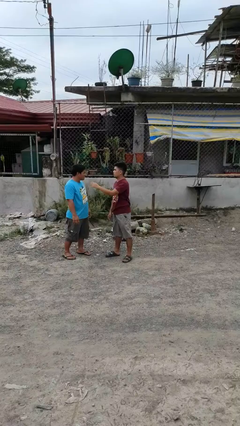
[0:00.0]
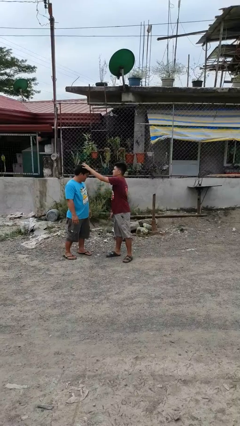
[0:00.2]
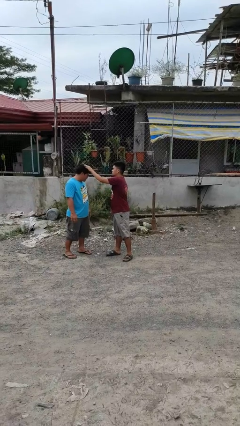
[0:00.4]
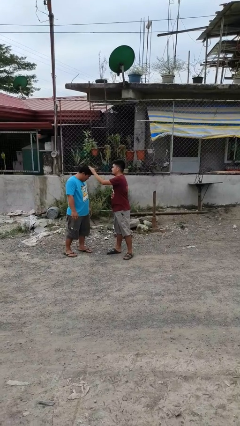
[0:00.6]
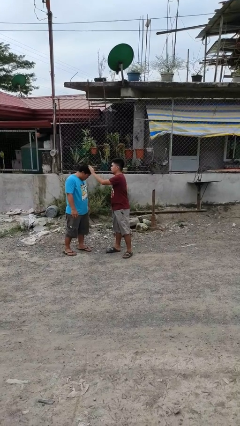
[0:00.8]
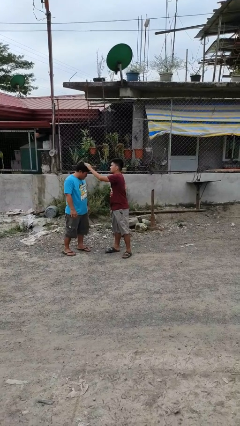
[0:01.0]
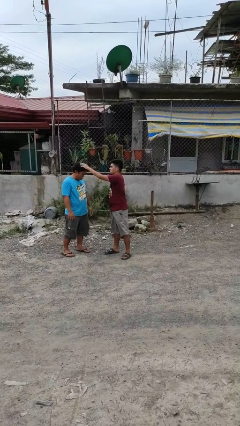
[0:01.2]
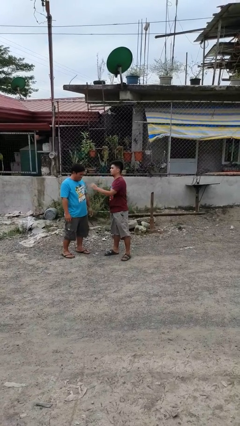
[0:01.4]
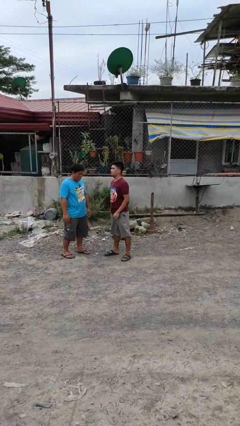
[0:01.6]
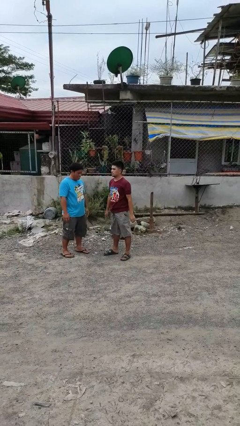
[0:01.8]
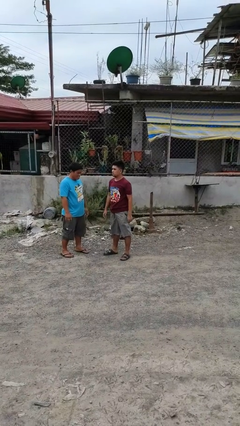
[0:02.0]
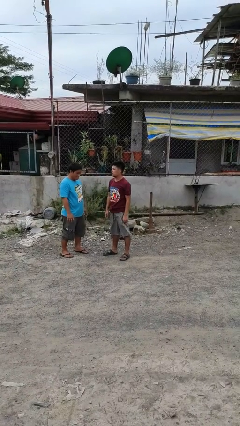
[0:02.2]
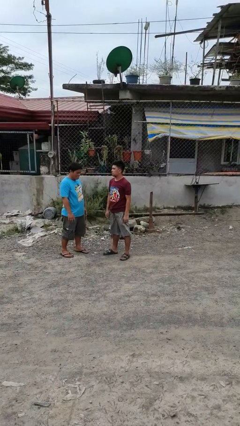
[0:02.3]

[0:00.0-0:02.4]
person grabs person by hair

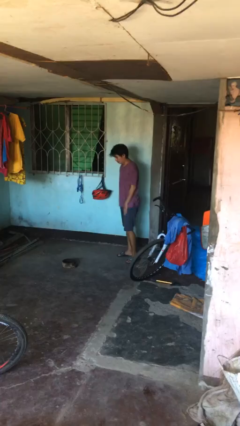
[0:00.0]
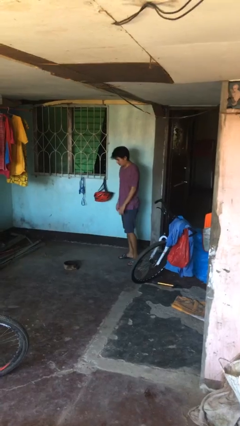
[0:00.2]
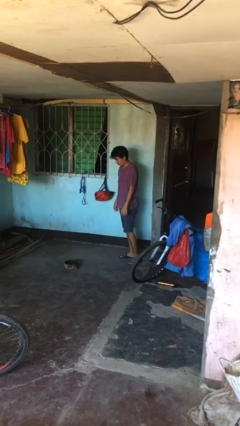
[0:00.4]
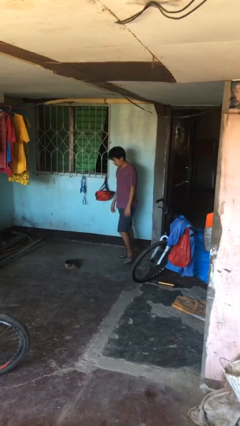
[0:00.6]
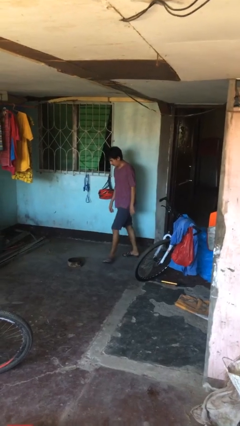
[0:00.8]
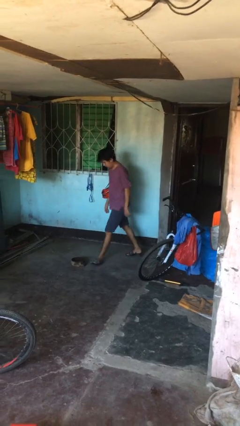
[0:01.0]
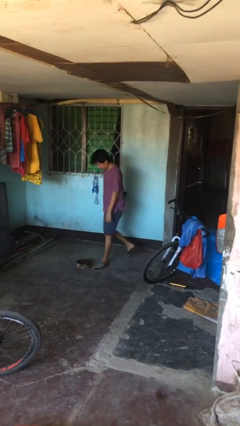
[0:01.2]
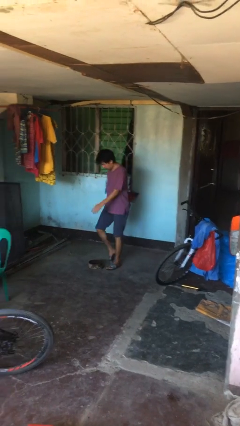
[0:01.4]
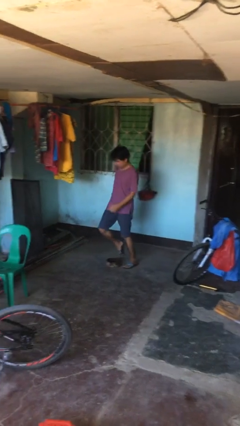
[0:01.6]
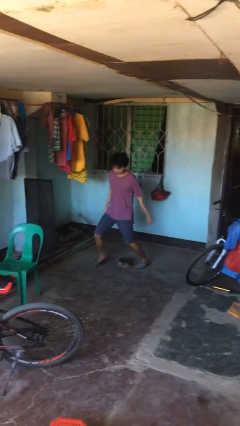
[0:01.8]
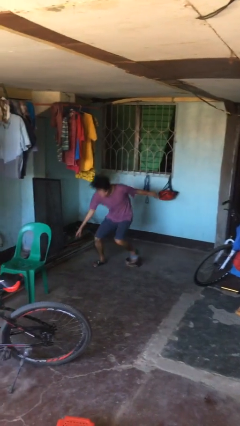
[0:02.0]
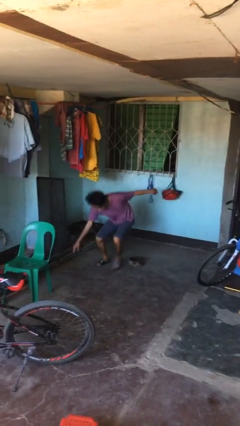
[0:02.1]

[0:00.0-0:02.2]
person trips on object on floor

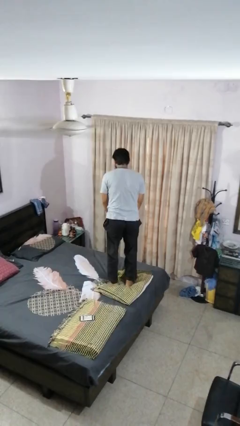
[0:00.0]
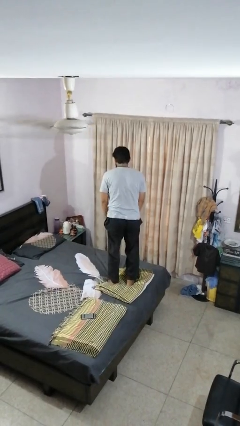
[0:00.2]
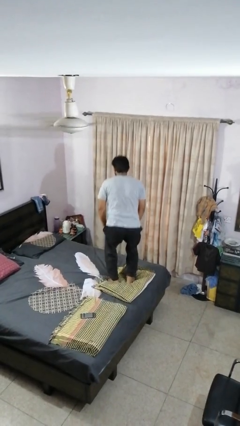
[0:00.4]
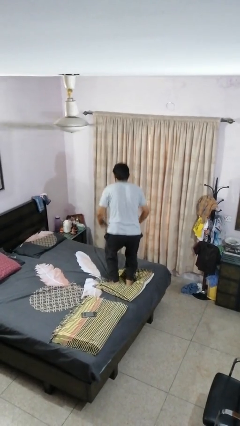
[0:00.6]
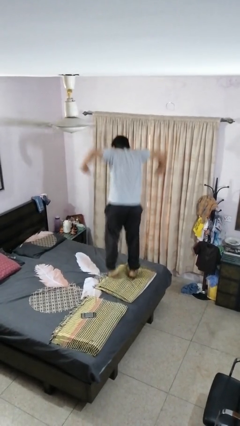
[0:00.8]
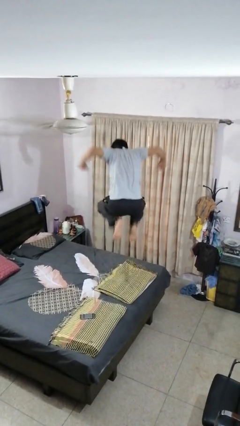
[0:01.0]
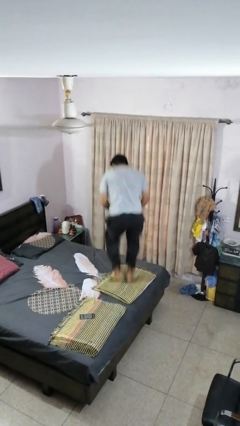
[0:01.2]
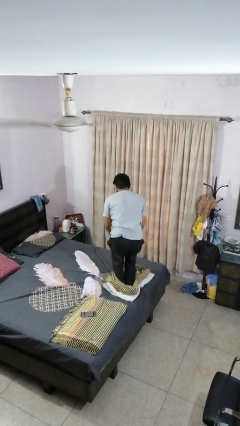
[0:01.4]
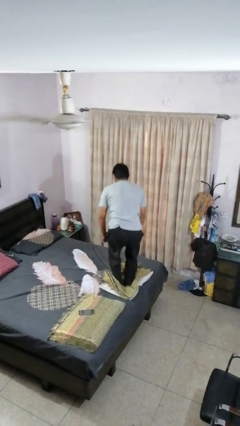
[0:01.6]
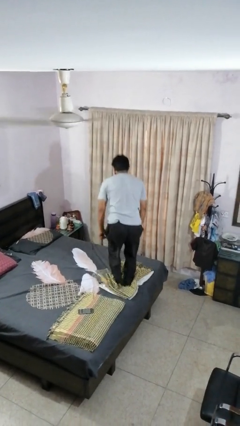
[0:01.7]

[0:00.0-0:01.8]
person jumps on bed

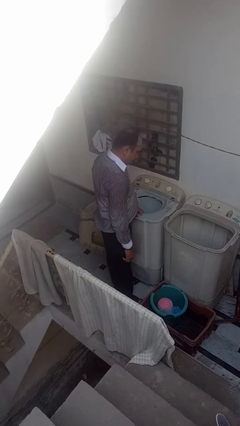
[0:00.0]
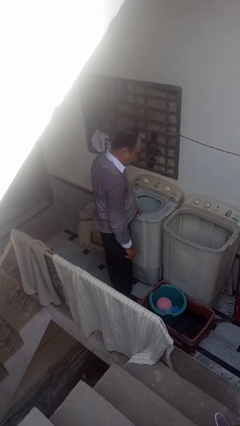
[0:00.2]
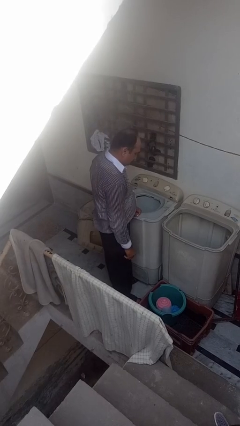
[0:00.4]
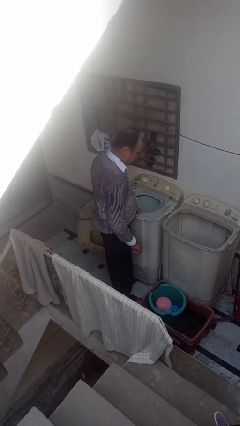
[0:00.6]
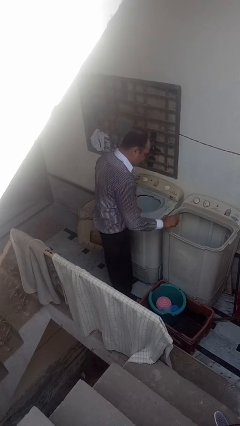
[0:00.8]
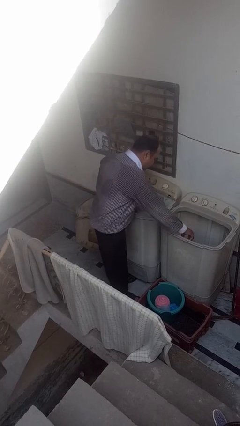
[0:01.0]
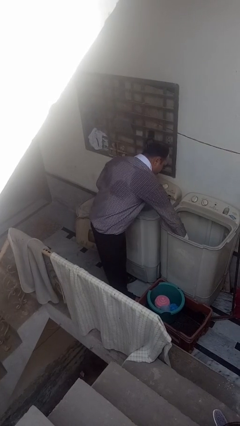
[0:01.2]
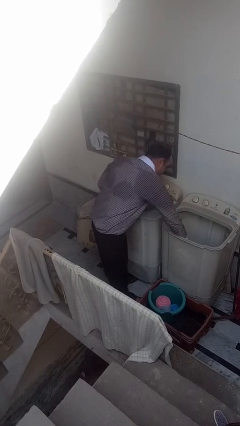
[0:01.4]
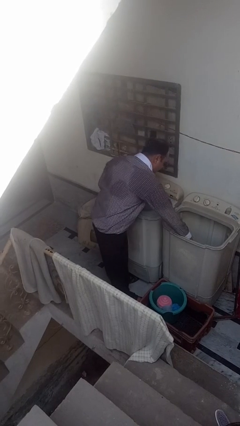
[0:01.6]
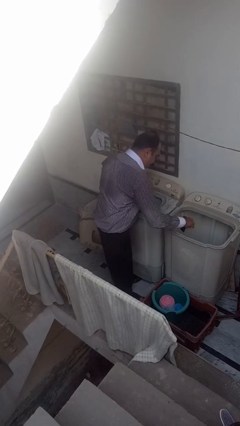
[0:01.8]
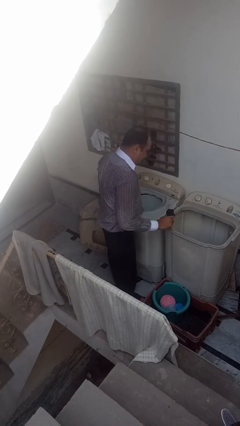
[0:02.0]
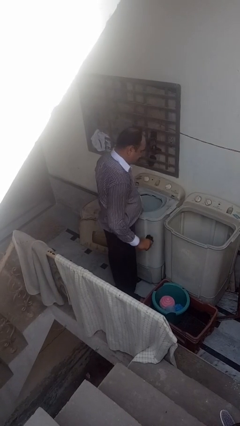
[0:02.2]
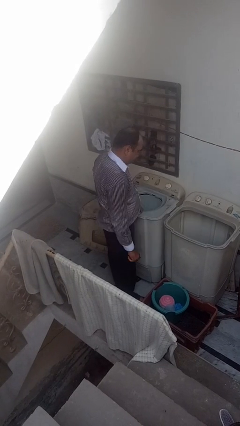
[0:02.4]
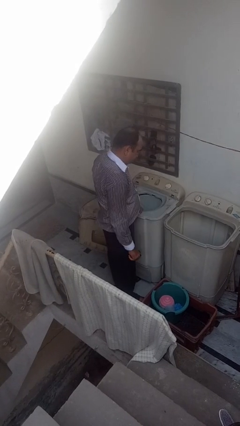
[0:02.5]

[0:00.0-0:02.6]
person unloads clotheswasher

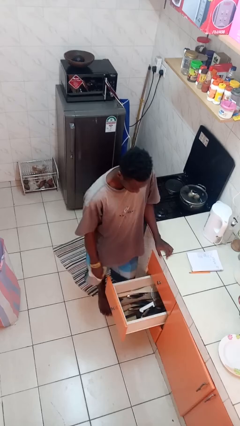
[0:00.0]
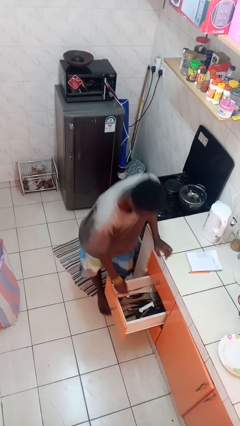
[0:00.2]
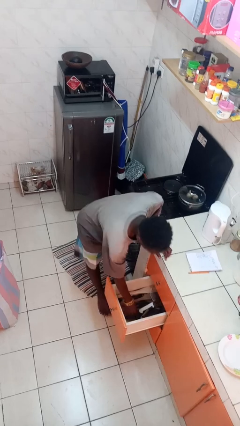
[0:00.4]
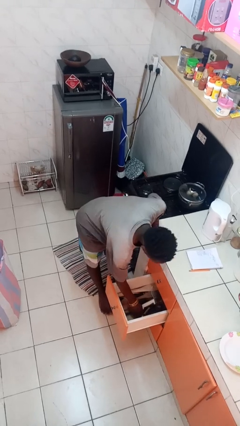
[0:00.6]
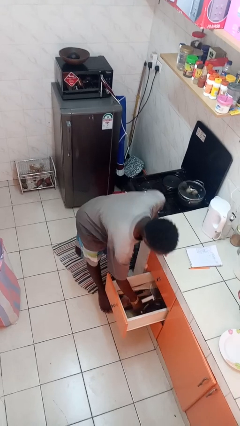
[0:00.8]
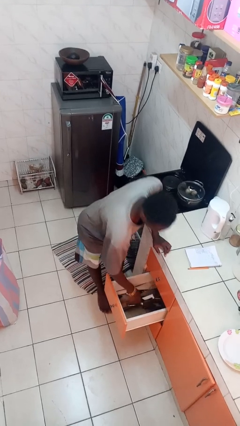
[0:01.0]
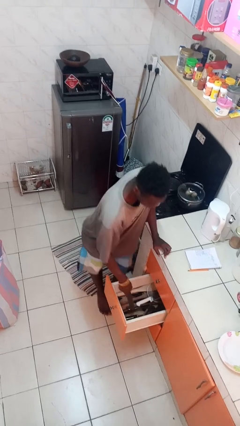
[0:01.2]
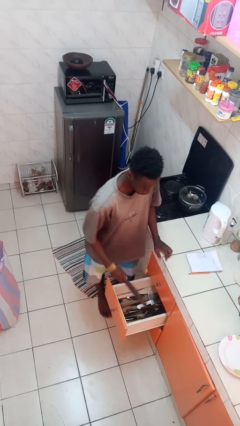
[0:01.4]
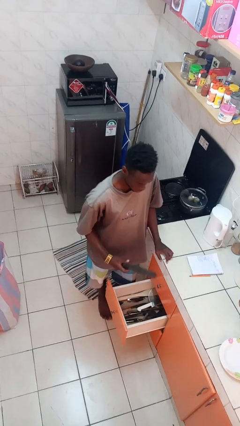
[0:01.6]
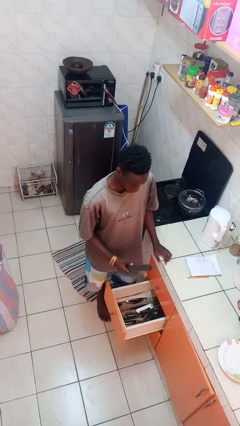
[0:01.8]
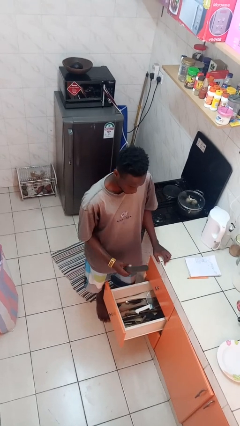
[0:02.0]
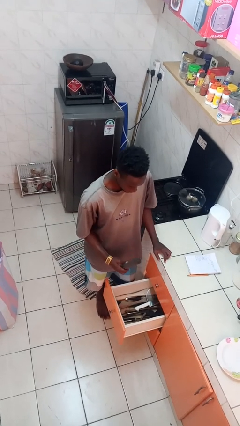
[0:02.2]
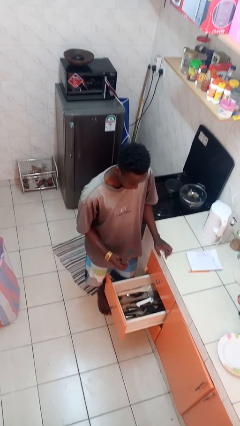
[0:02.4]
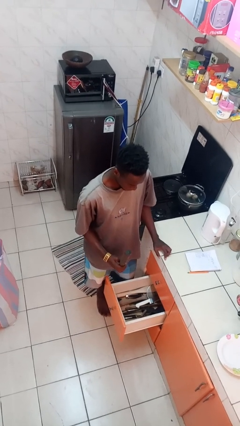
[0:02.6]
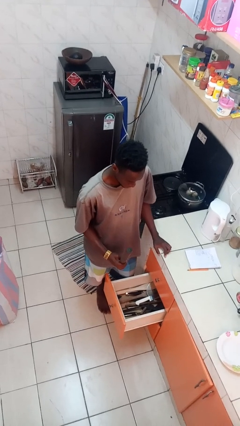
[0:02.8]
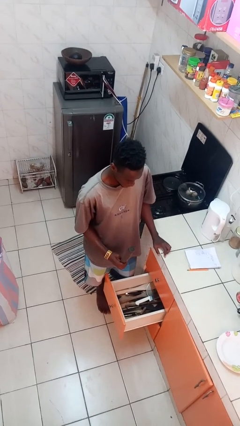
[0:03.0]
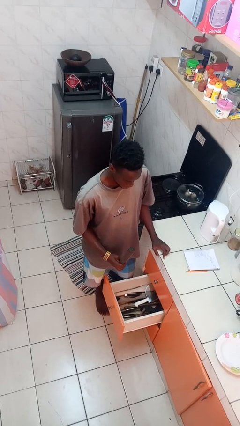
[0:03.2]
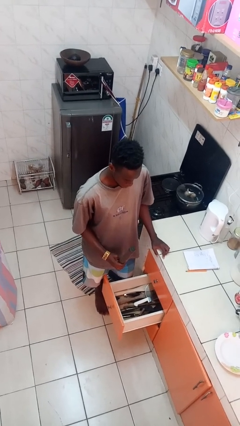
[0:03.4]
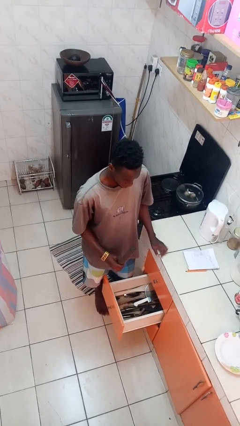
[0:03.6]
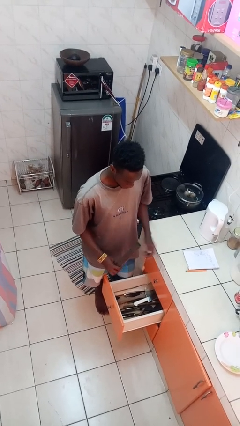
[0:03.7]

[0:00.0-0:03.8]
person takes object from kitchen drawer

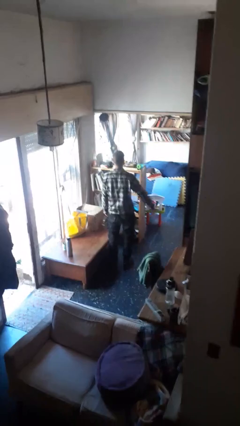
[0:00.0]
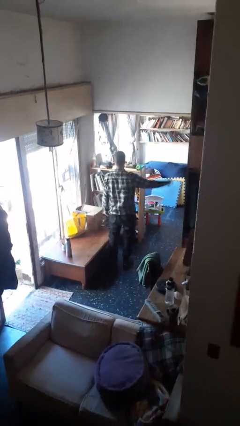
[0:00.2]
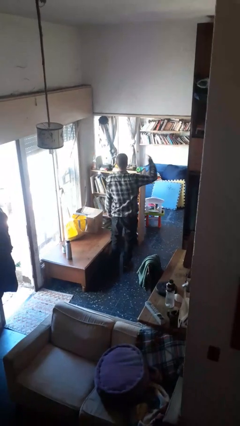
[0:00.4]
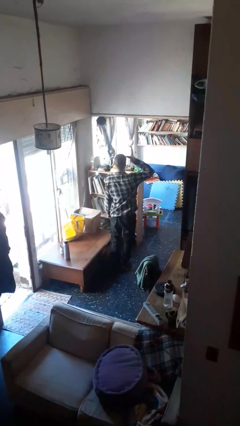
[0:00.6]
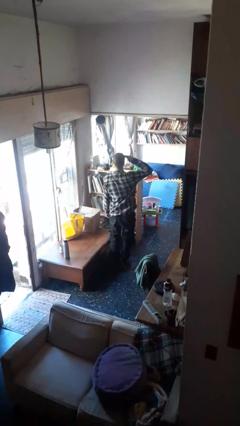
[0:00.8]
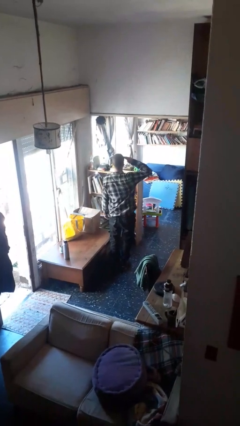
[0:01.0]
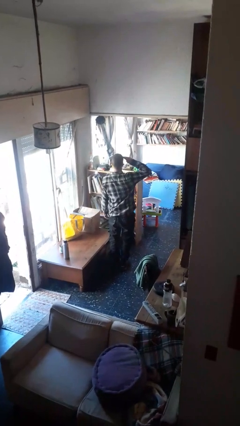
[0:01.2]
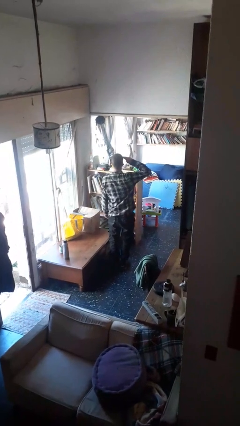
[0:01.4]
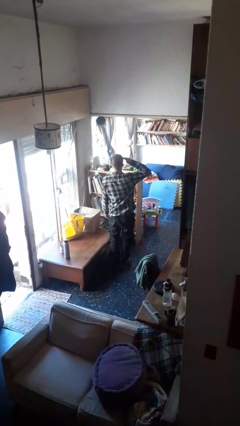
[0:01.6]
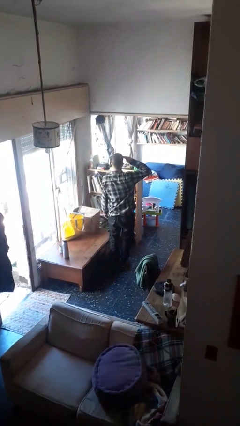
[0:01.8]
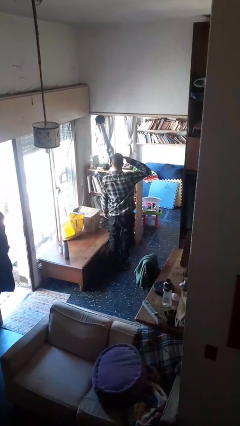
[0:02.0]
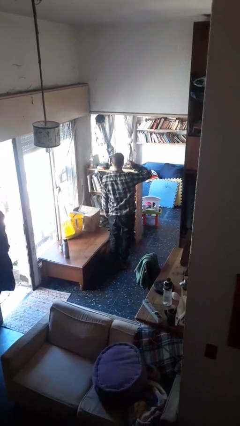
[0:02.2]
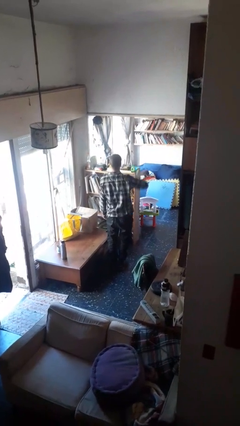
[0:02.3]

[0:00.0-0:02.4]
person salutes

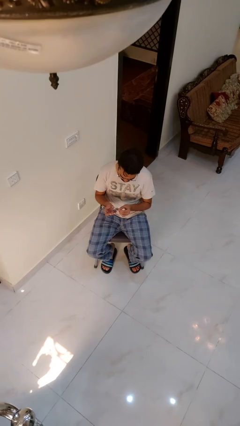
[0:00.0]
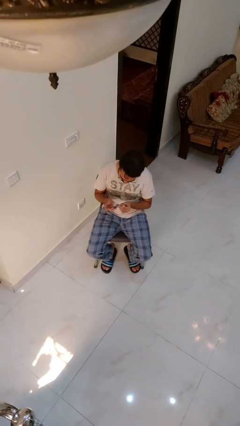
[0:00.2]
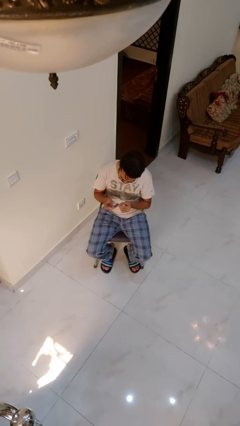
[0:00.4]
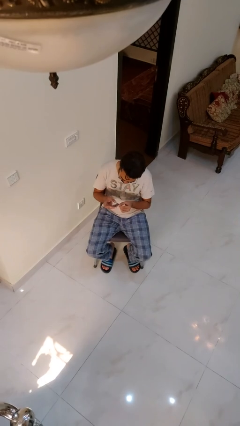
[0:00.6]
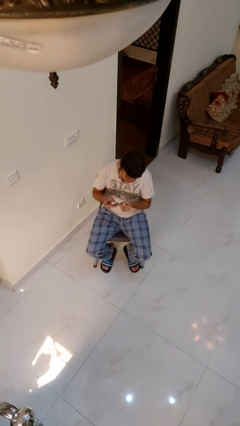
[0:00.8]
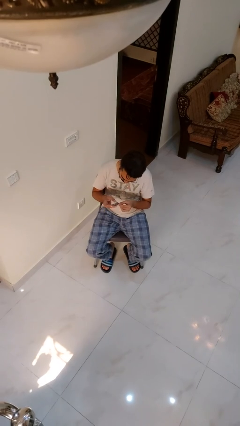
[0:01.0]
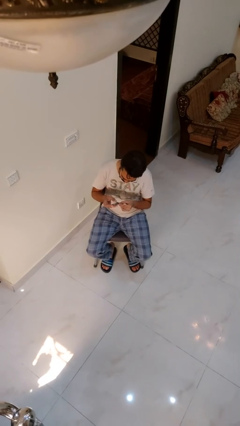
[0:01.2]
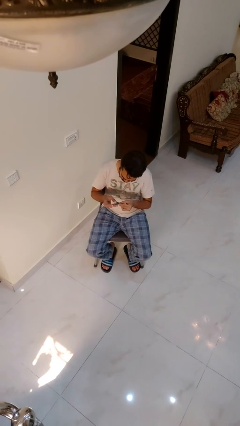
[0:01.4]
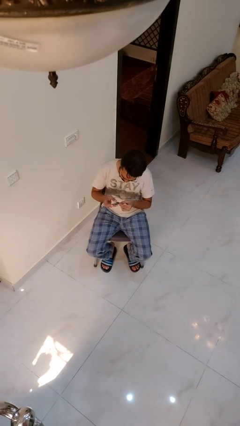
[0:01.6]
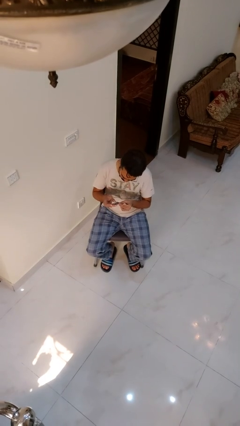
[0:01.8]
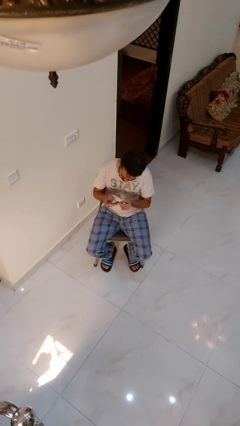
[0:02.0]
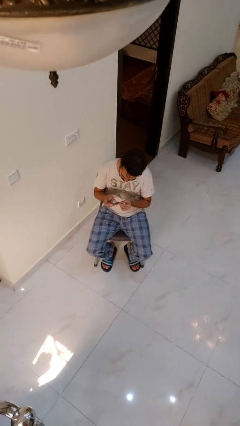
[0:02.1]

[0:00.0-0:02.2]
person clips fingernails
